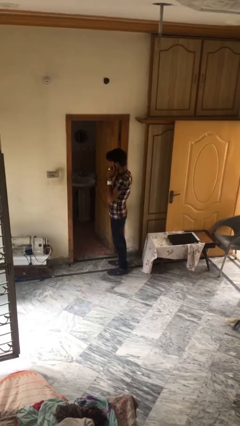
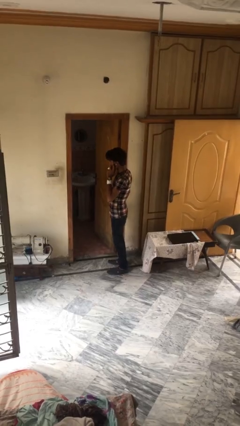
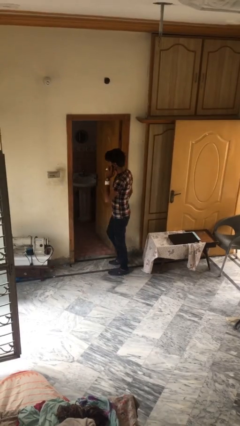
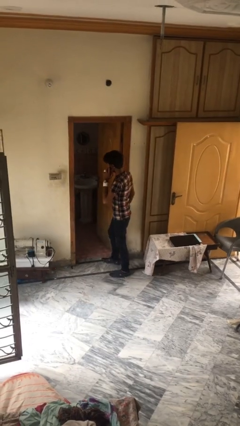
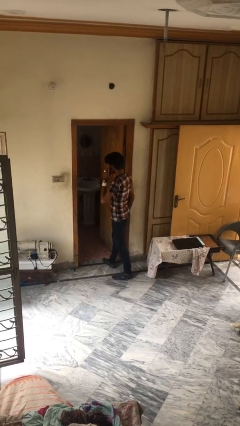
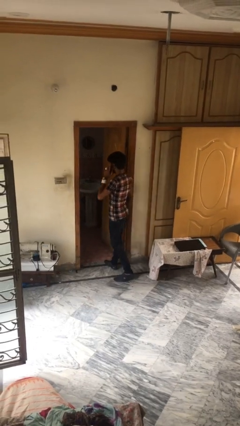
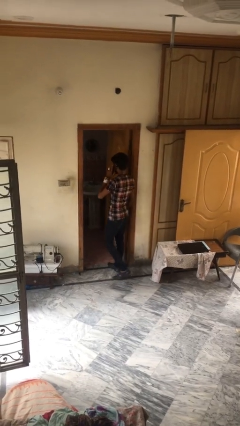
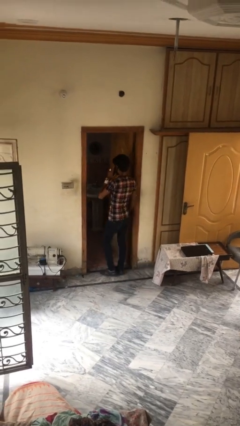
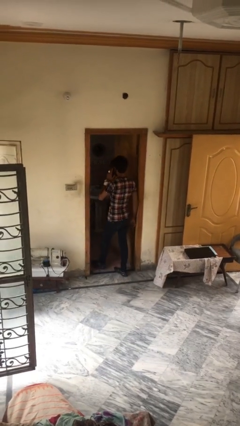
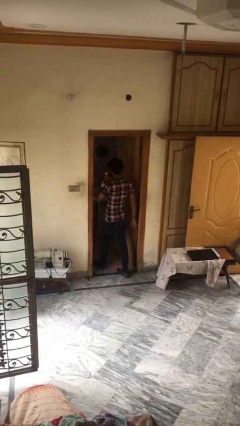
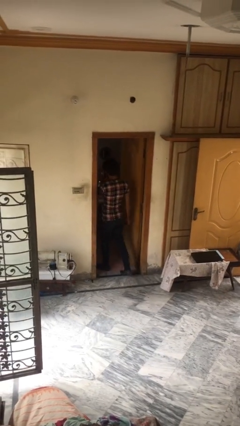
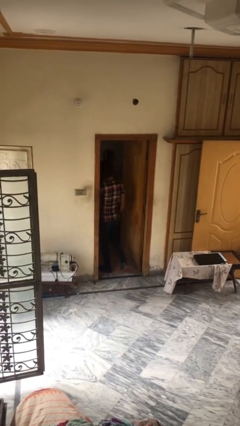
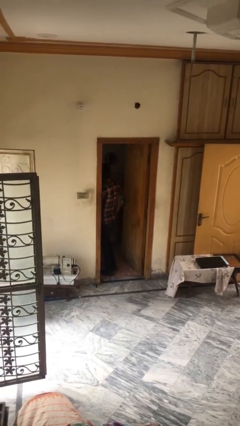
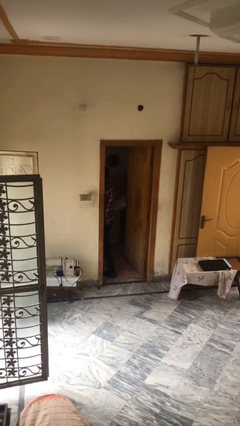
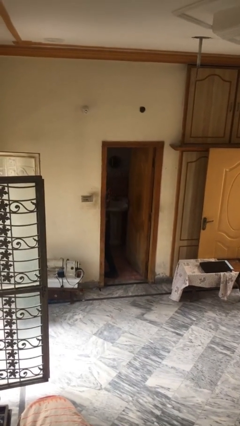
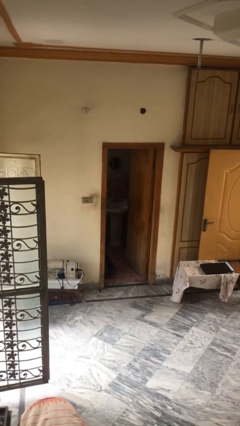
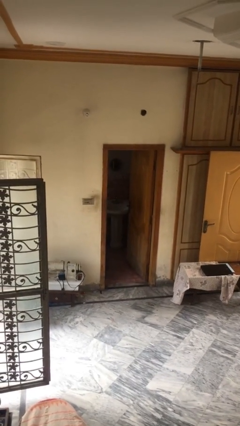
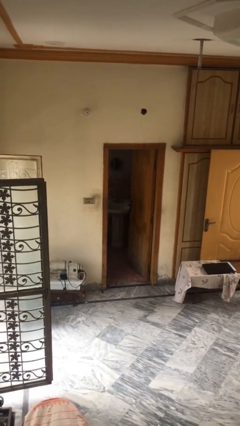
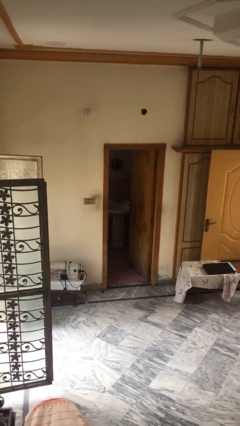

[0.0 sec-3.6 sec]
person exits scene through structure

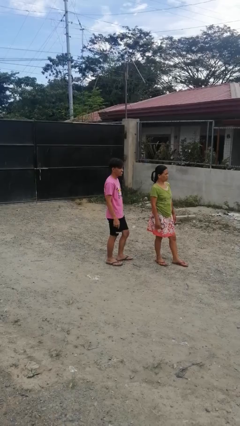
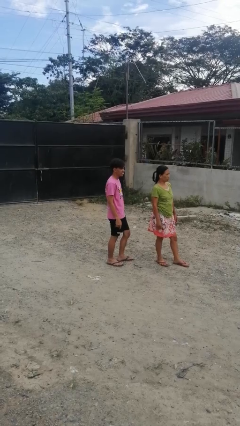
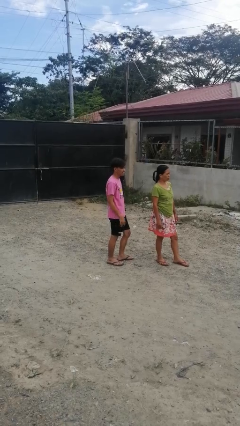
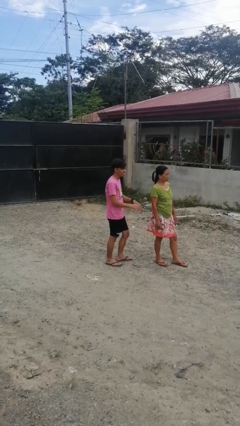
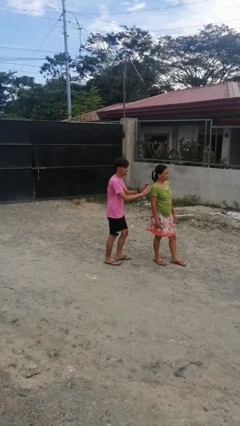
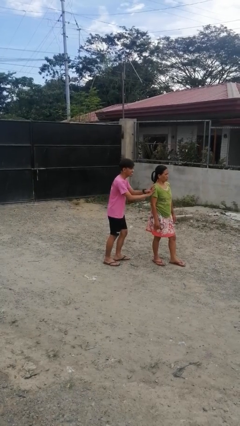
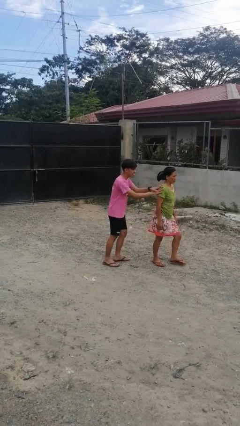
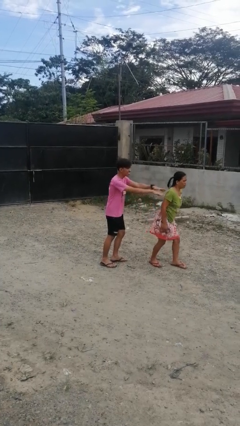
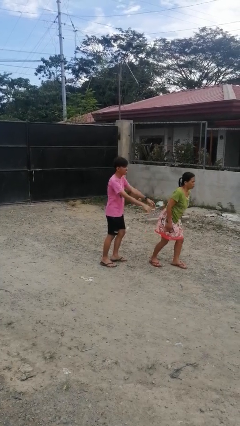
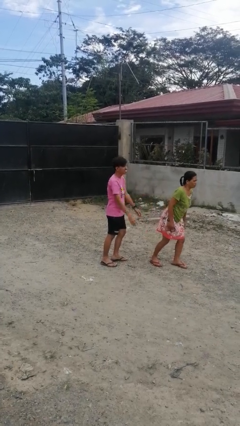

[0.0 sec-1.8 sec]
person shoves person

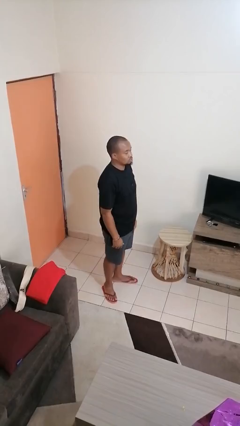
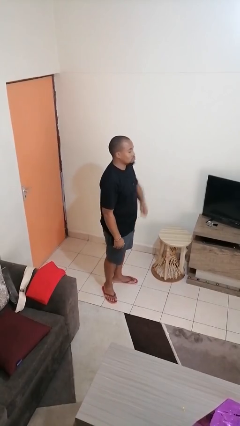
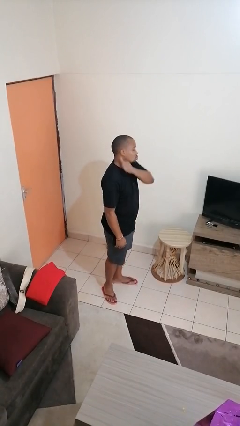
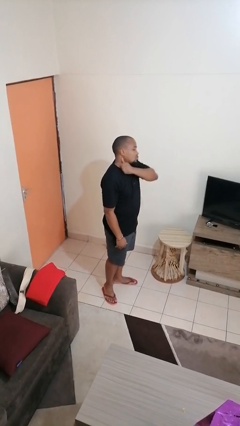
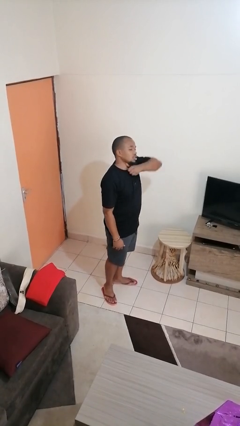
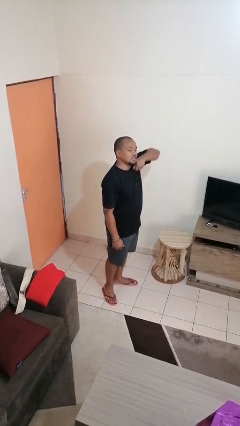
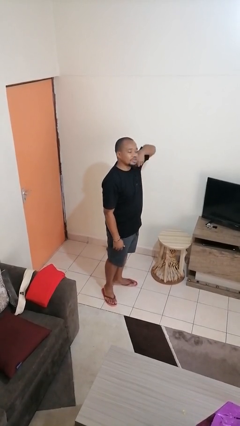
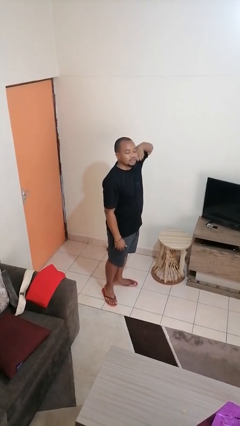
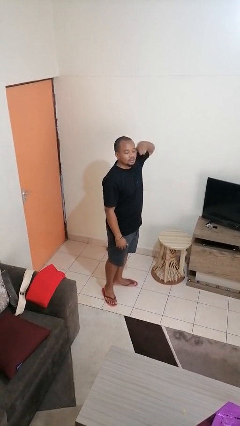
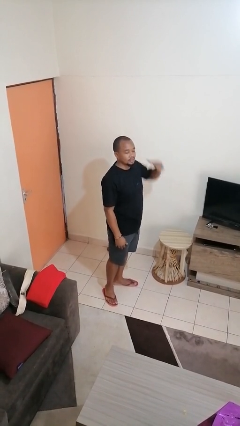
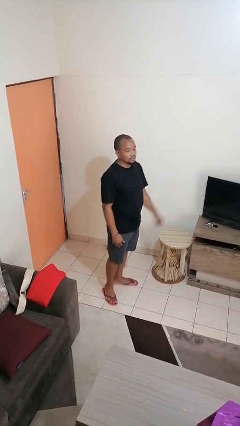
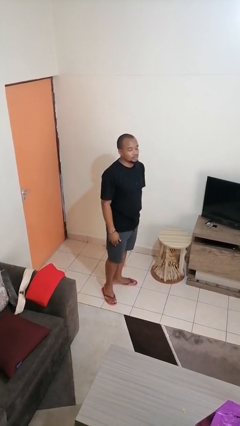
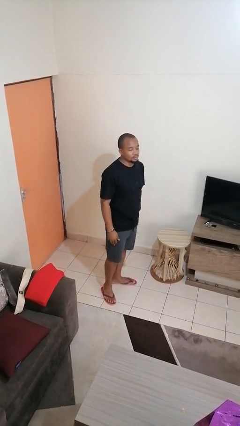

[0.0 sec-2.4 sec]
person gestures cut

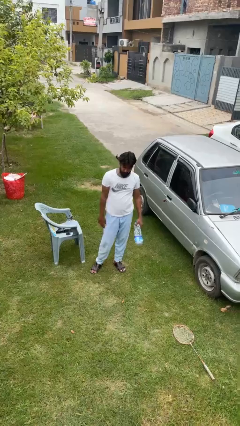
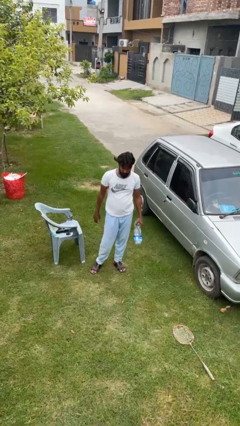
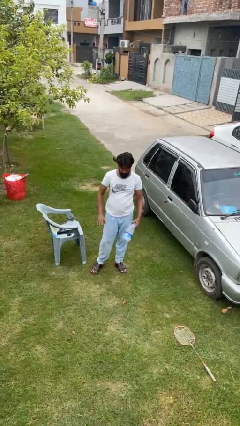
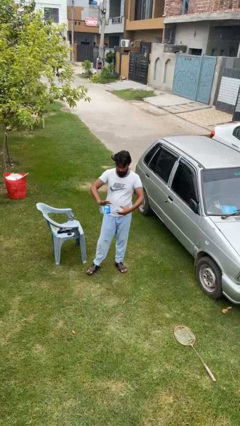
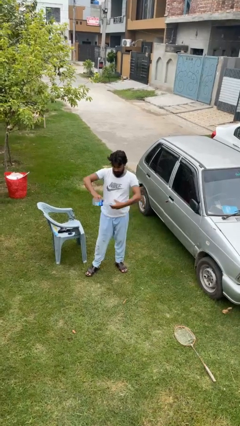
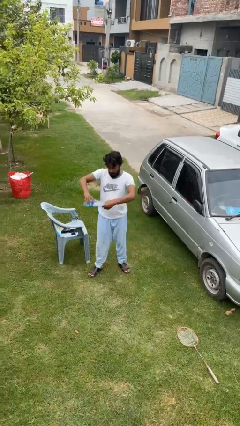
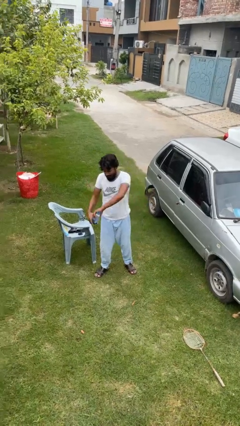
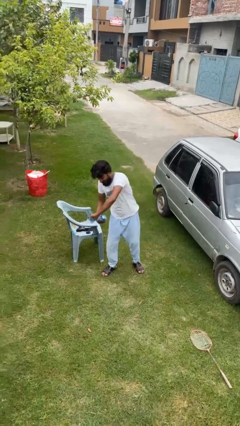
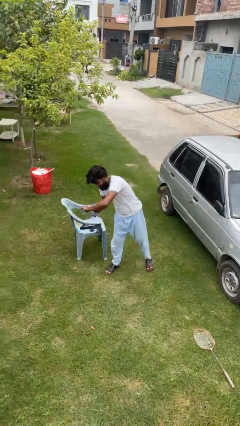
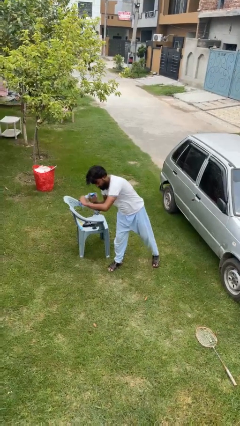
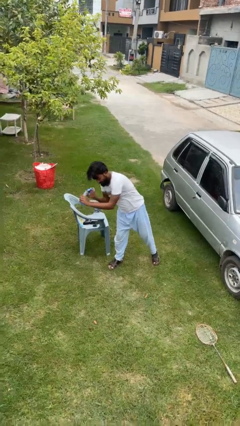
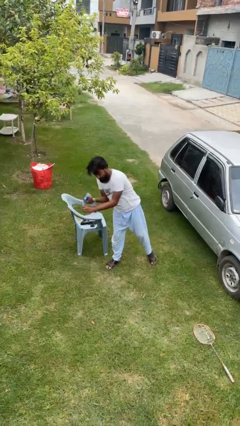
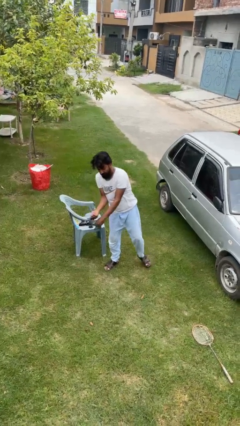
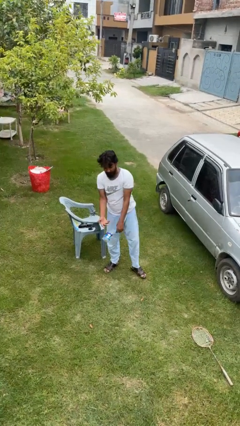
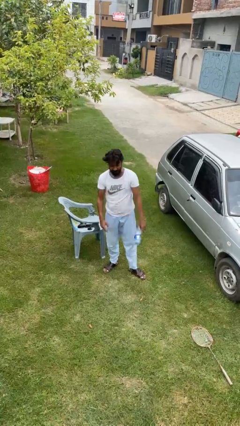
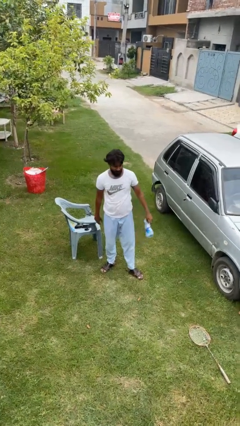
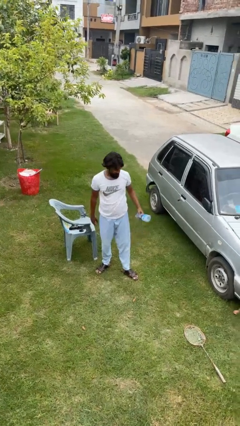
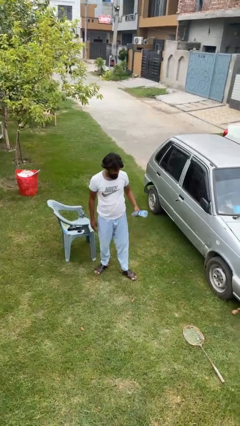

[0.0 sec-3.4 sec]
person squeezes object

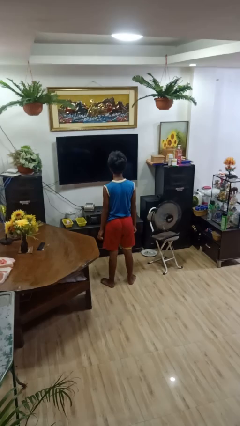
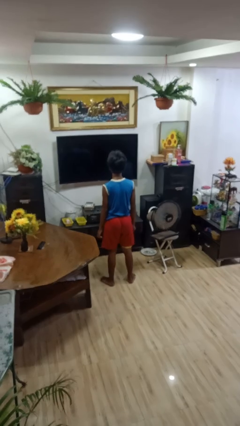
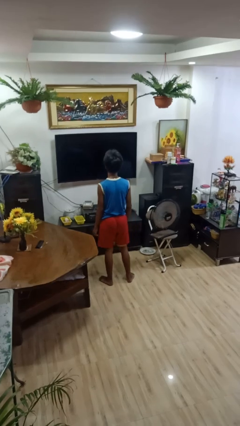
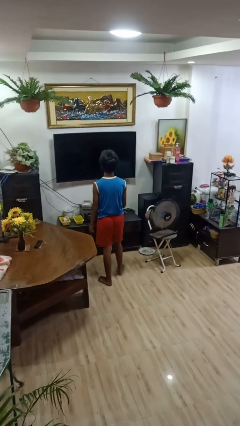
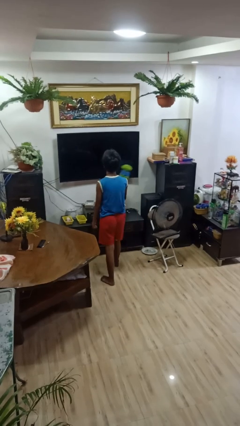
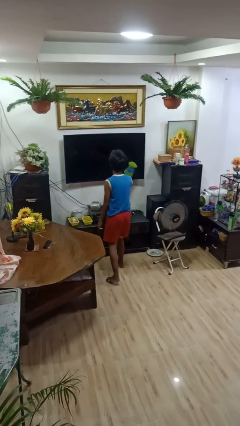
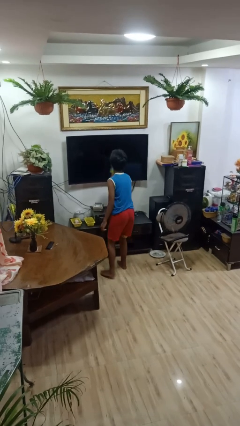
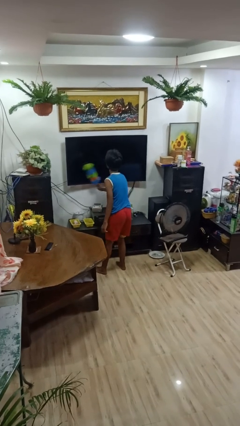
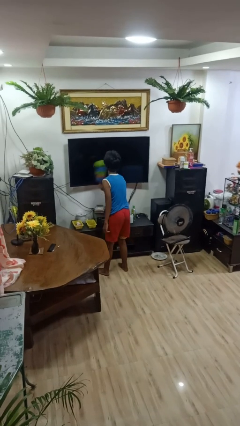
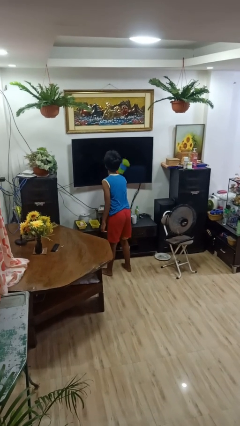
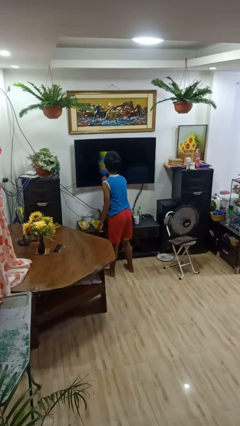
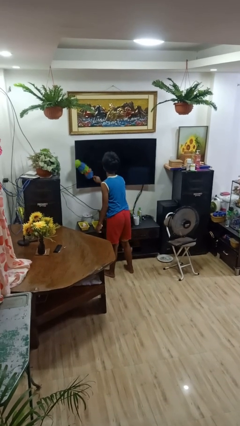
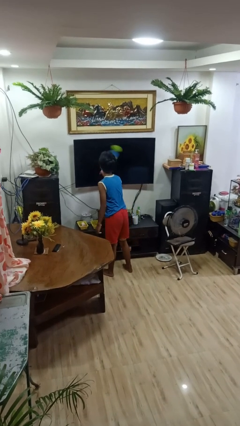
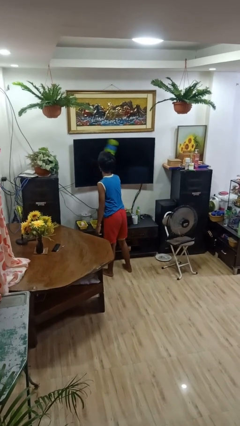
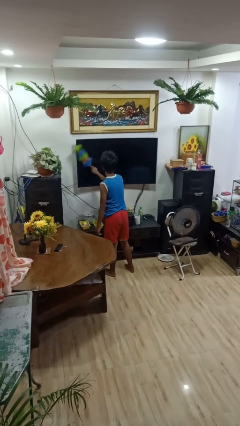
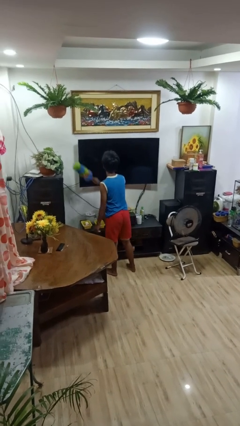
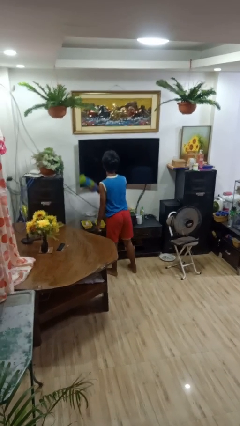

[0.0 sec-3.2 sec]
person dusts furniture

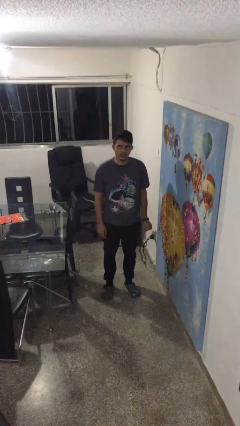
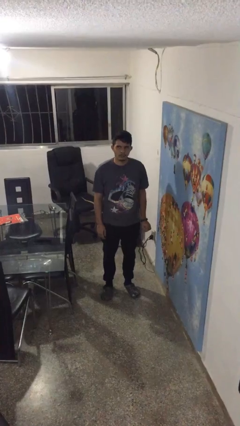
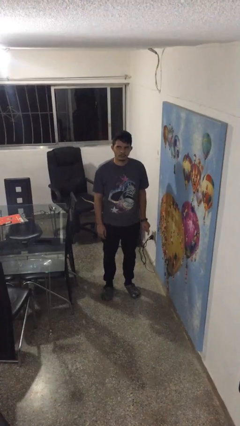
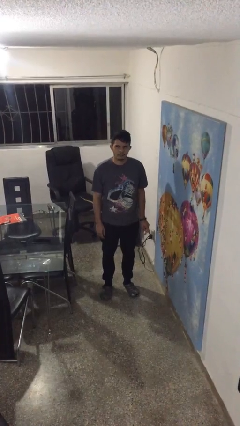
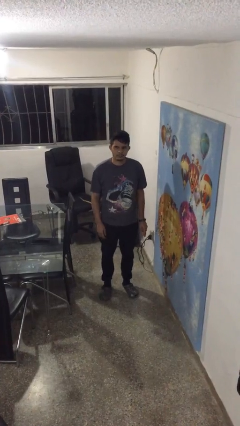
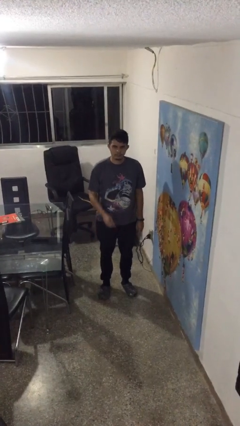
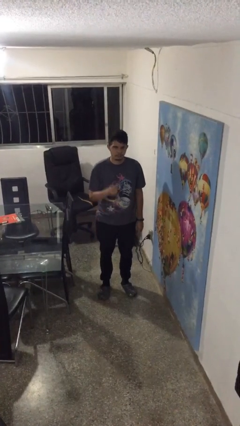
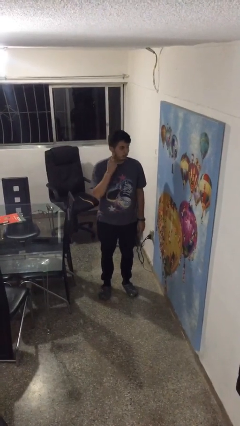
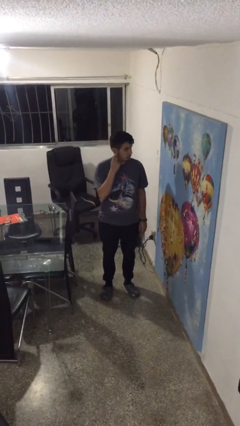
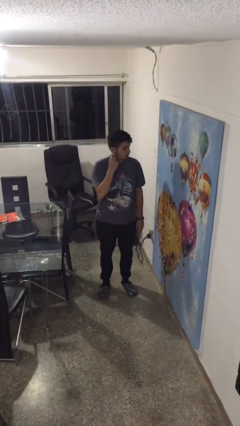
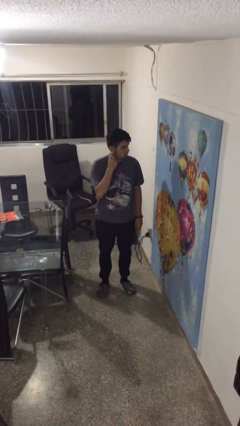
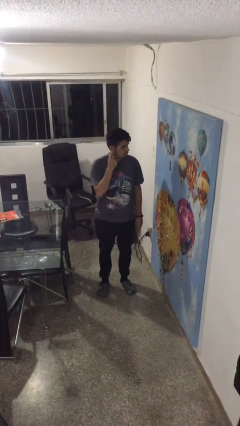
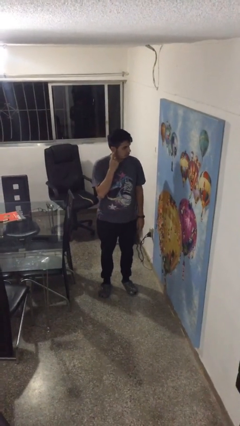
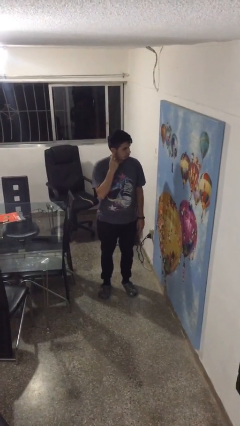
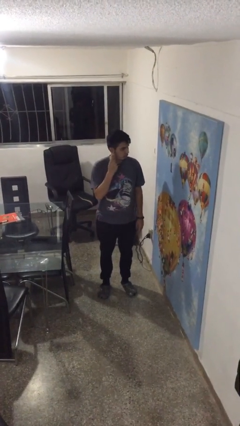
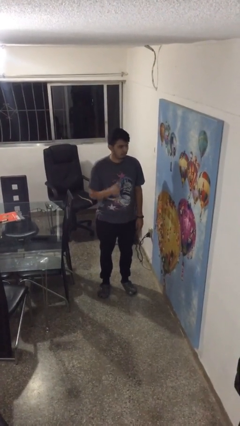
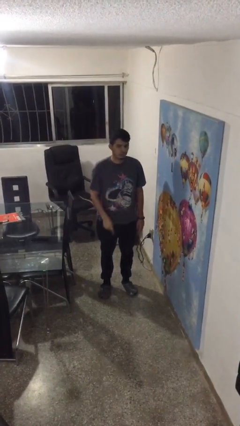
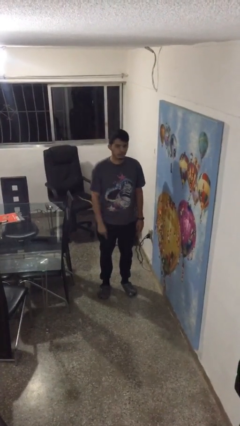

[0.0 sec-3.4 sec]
person gestures listen closely
